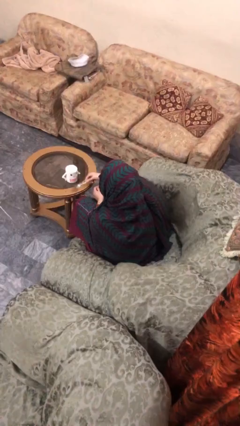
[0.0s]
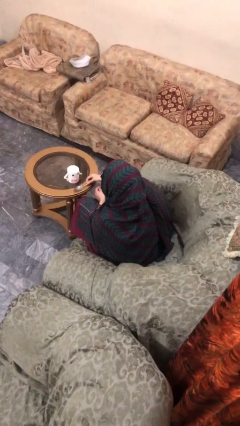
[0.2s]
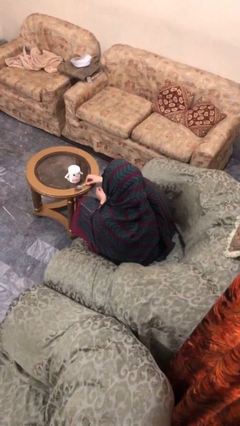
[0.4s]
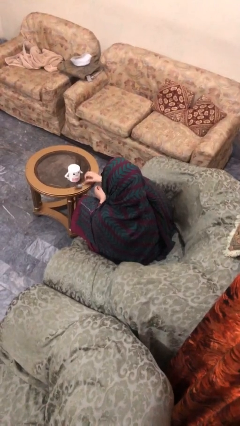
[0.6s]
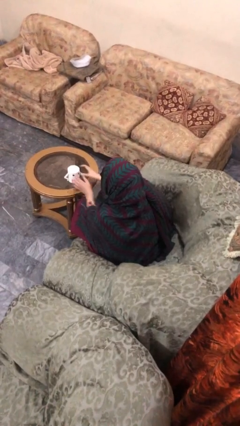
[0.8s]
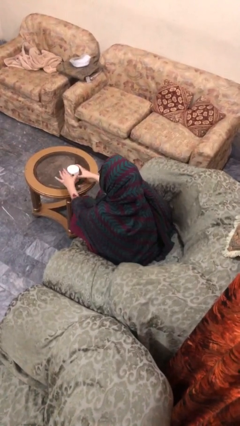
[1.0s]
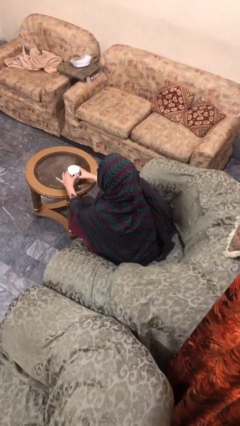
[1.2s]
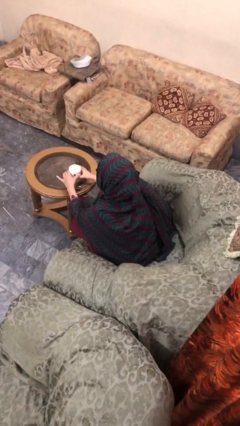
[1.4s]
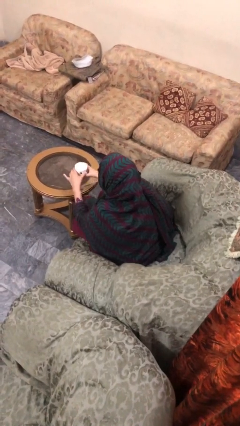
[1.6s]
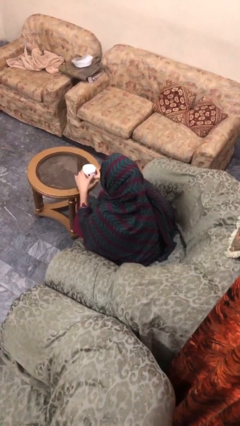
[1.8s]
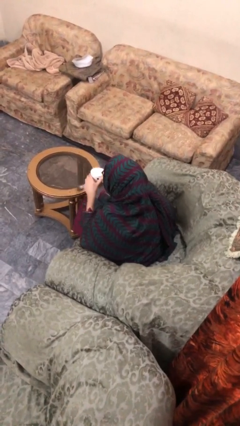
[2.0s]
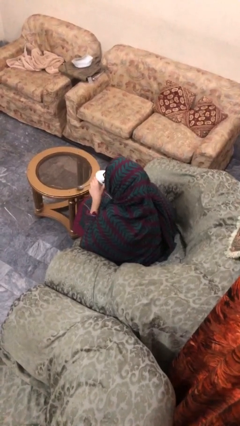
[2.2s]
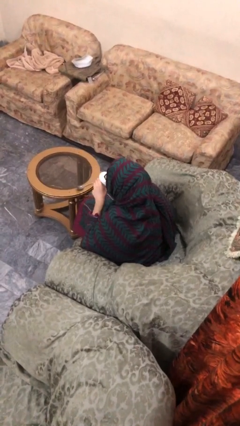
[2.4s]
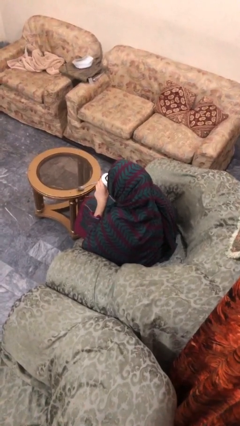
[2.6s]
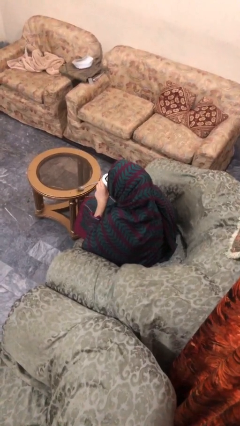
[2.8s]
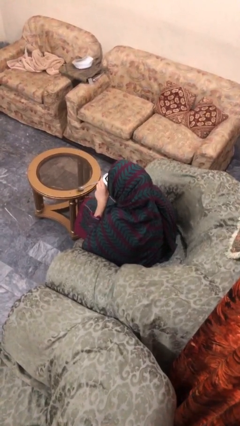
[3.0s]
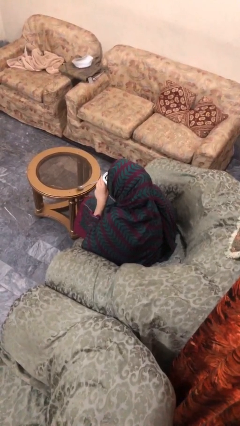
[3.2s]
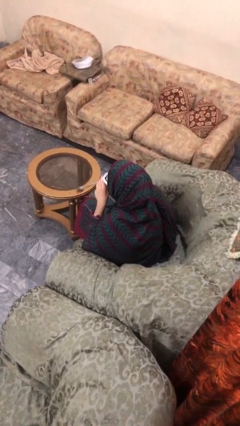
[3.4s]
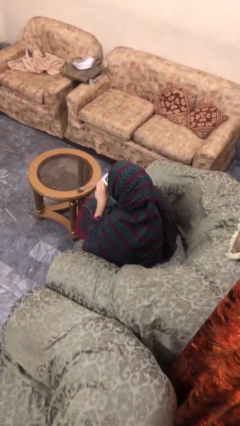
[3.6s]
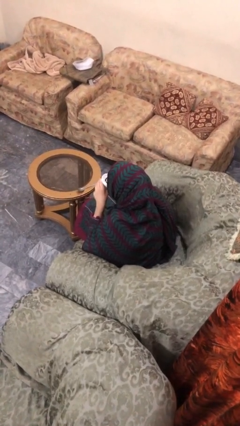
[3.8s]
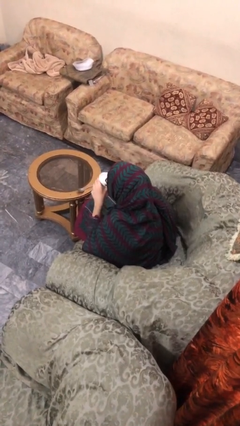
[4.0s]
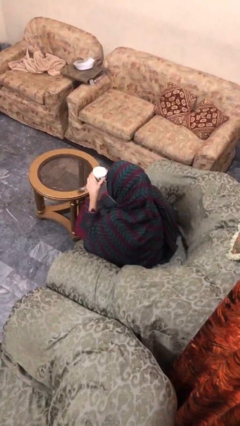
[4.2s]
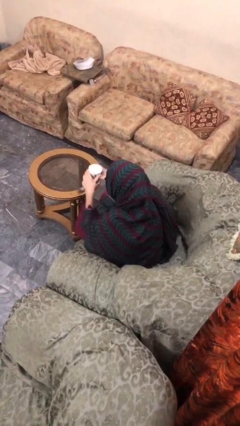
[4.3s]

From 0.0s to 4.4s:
person drinks from mug

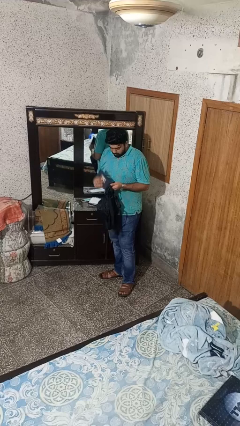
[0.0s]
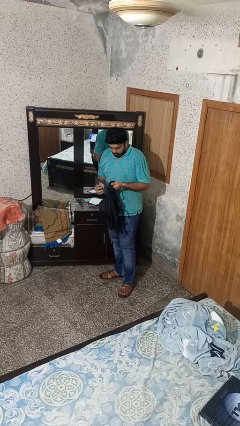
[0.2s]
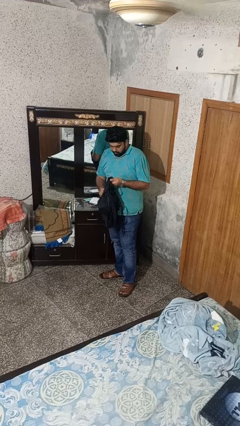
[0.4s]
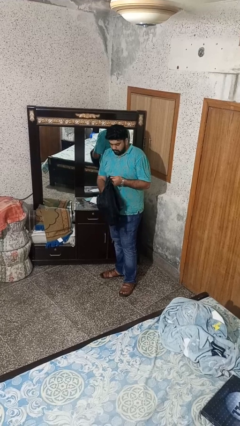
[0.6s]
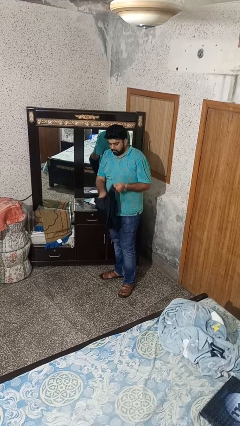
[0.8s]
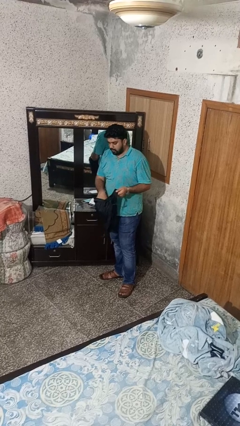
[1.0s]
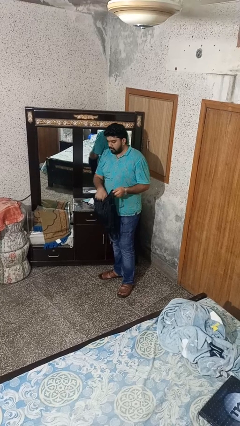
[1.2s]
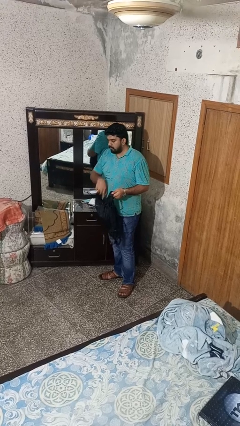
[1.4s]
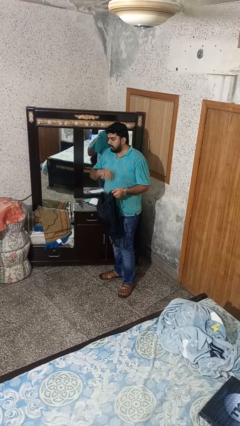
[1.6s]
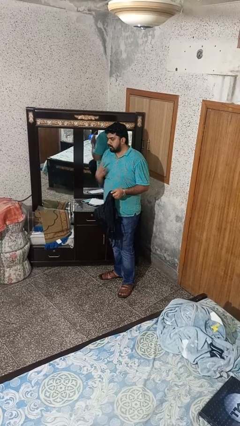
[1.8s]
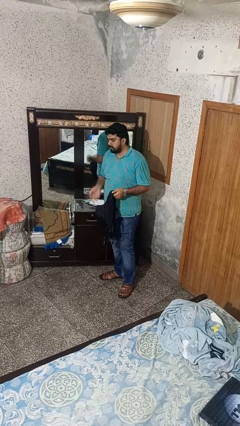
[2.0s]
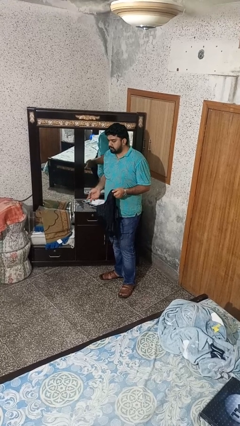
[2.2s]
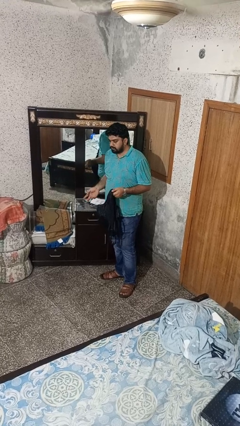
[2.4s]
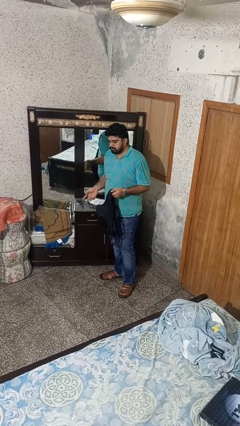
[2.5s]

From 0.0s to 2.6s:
person puts object into backpack

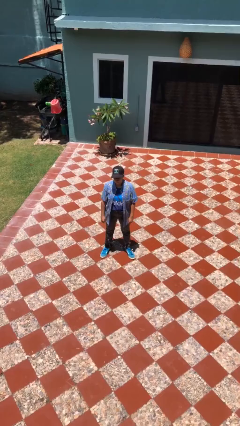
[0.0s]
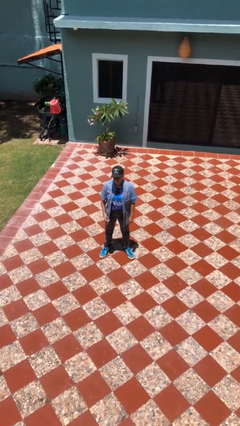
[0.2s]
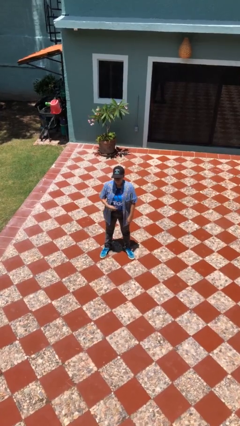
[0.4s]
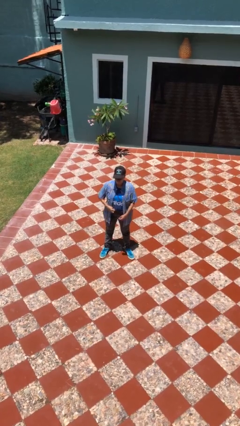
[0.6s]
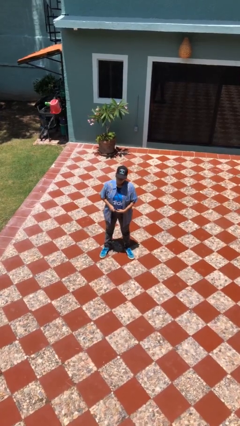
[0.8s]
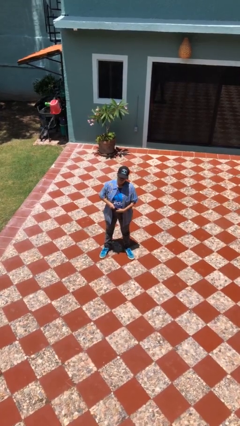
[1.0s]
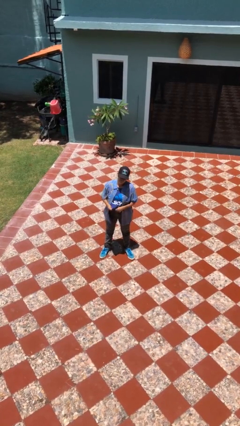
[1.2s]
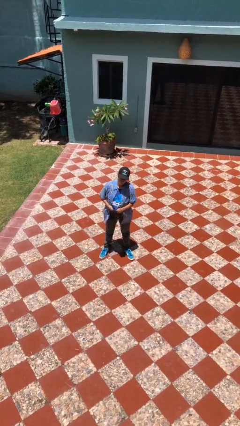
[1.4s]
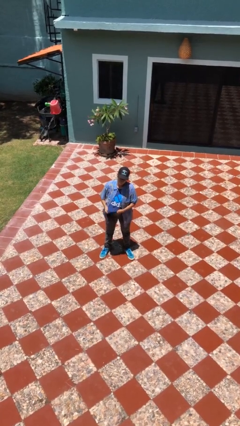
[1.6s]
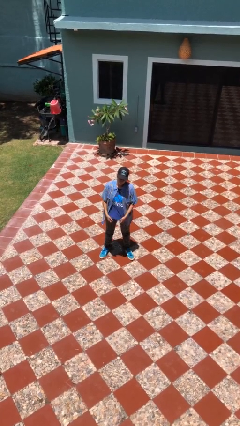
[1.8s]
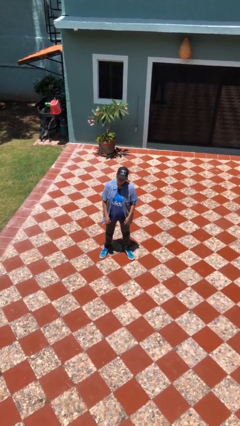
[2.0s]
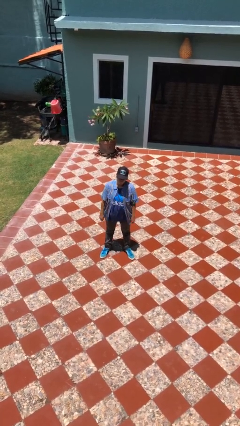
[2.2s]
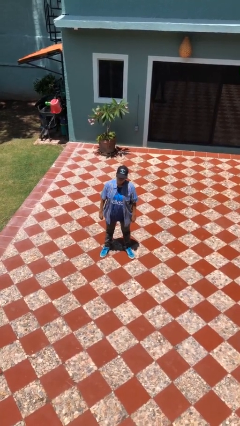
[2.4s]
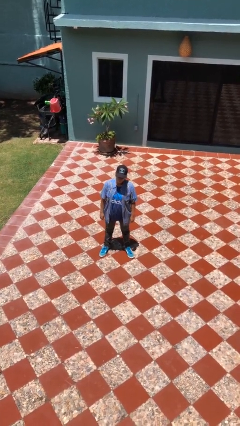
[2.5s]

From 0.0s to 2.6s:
person untucks shirt

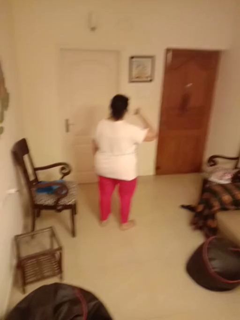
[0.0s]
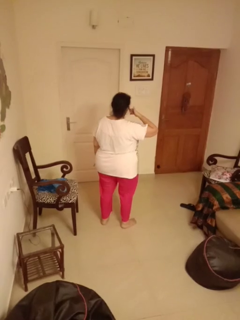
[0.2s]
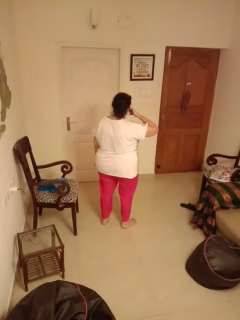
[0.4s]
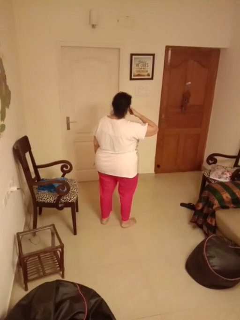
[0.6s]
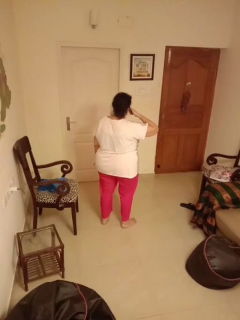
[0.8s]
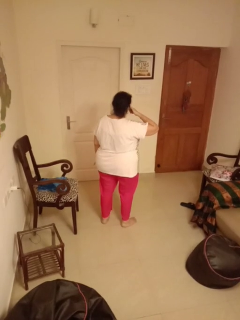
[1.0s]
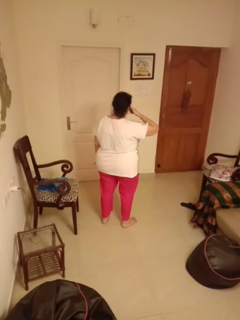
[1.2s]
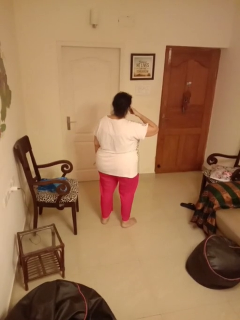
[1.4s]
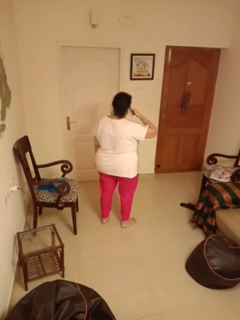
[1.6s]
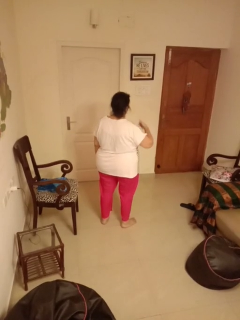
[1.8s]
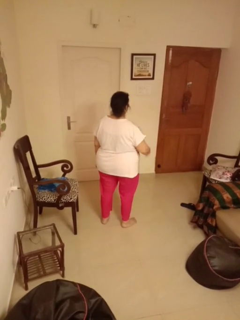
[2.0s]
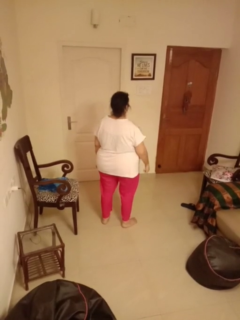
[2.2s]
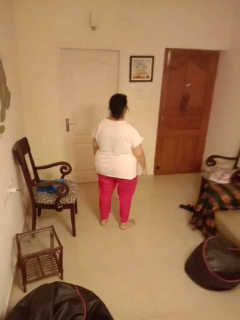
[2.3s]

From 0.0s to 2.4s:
person gestures call me

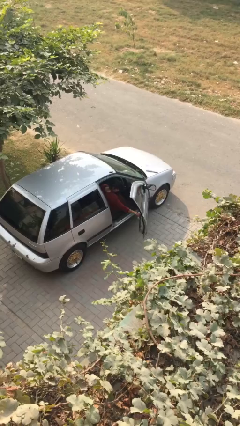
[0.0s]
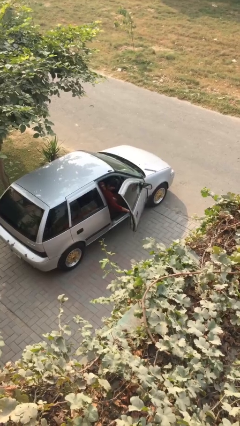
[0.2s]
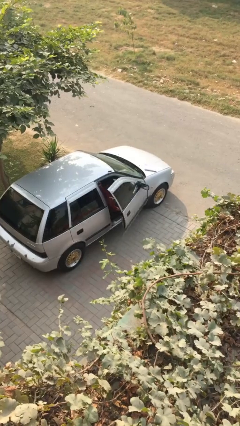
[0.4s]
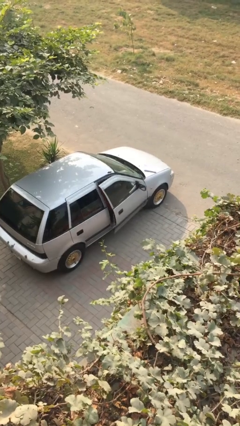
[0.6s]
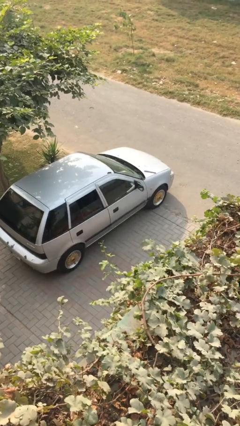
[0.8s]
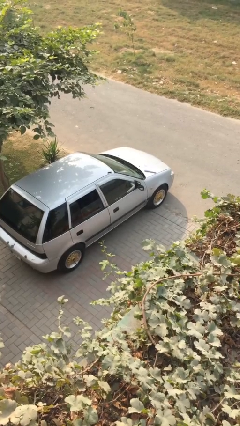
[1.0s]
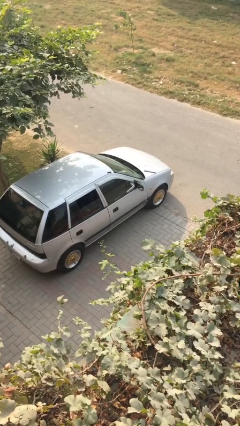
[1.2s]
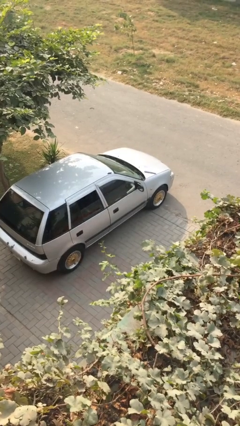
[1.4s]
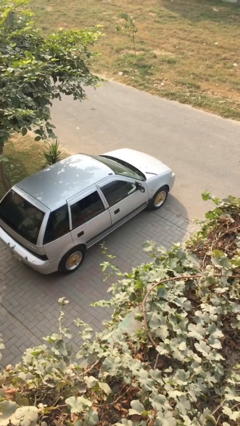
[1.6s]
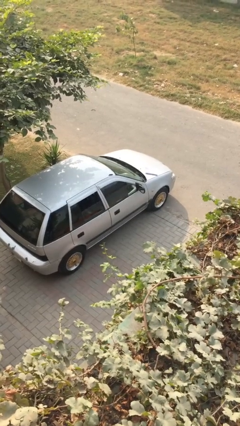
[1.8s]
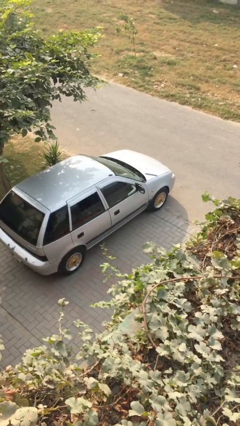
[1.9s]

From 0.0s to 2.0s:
person closes car door

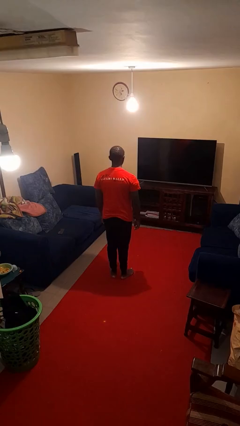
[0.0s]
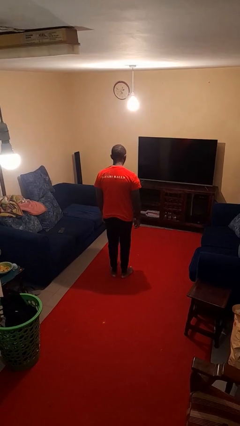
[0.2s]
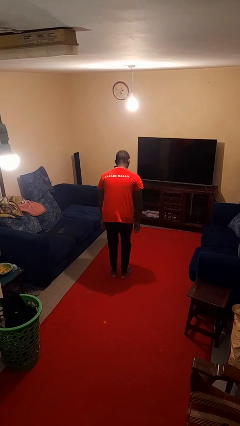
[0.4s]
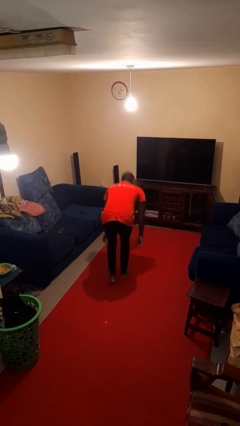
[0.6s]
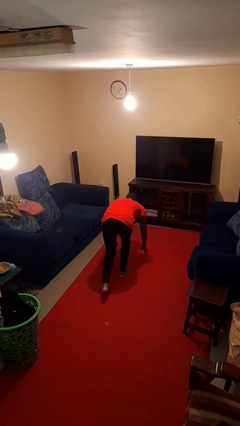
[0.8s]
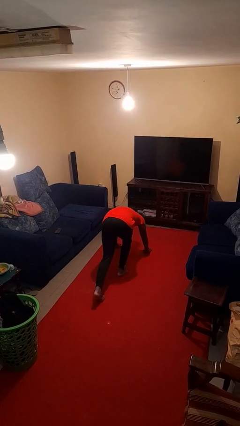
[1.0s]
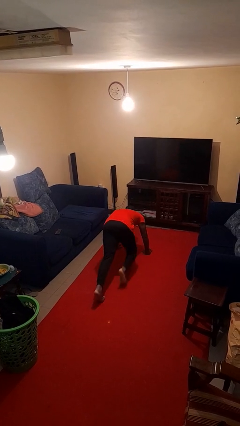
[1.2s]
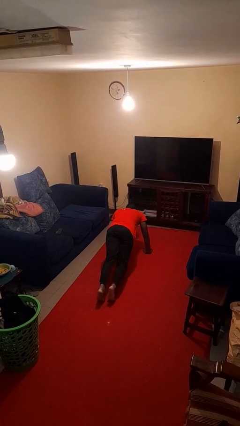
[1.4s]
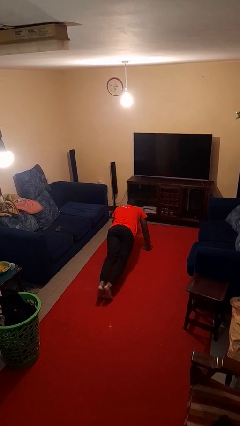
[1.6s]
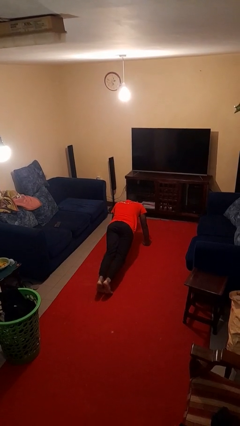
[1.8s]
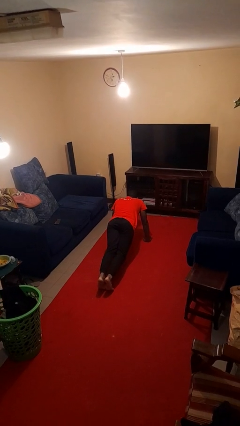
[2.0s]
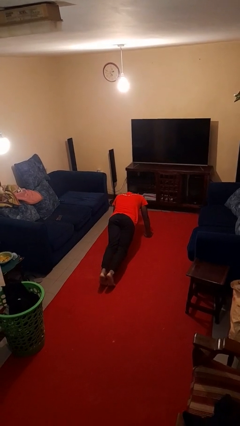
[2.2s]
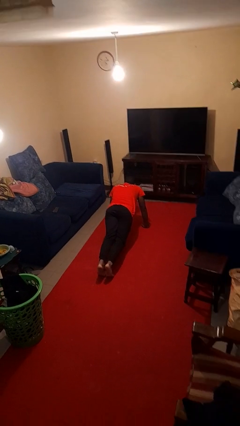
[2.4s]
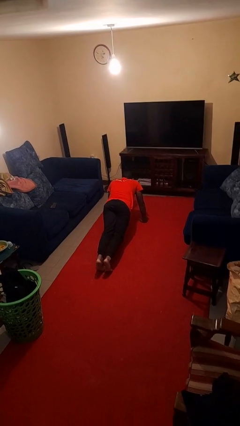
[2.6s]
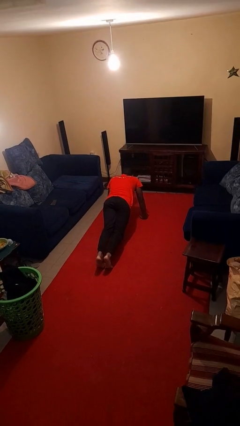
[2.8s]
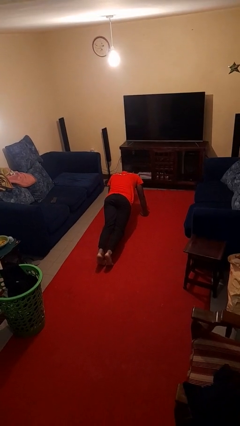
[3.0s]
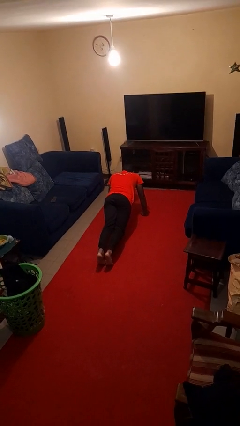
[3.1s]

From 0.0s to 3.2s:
person exercises with plank

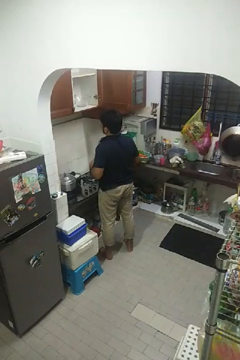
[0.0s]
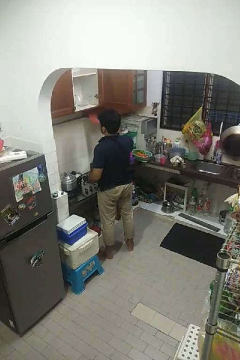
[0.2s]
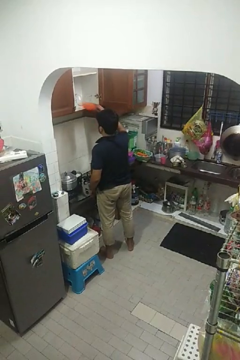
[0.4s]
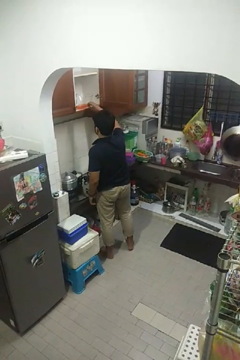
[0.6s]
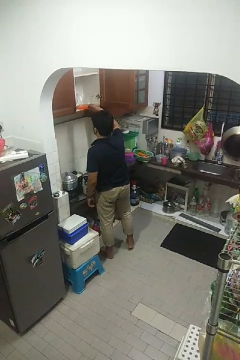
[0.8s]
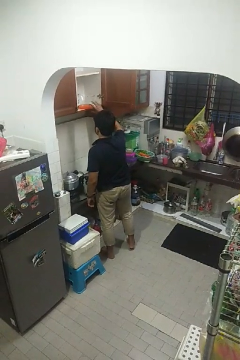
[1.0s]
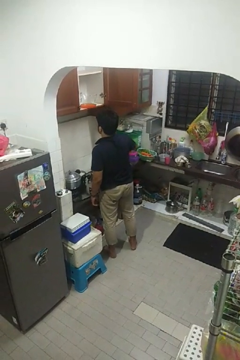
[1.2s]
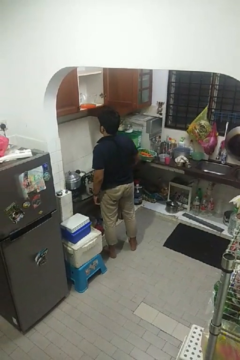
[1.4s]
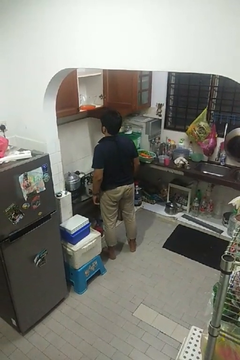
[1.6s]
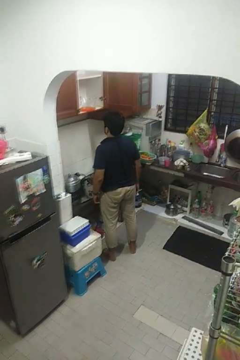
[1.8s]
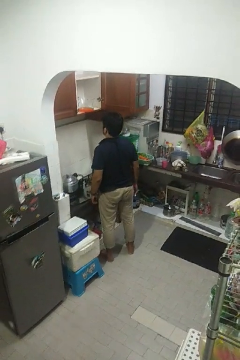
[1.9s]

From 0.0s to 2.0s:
person puts object in cabinet
